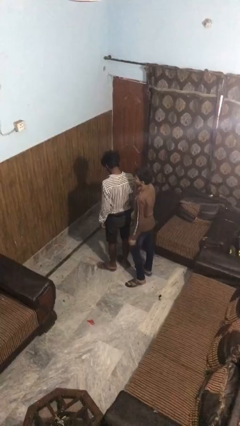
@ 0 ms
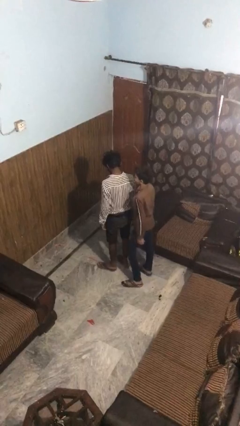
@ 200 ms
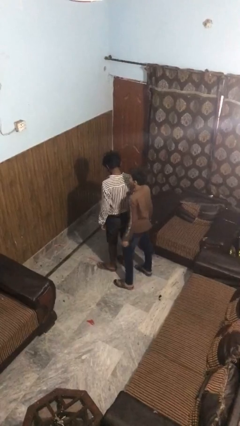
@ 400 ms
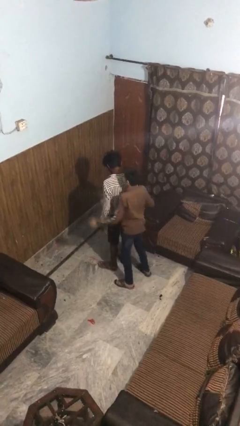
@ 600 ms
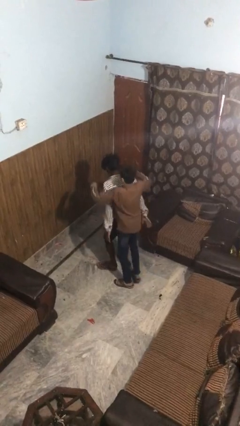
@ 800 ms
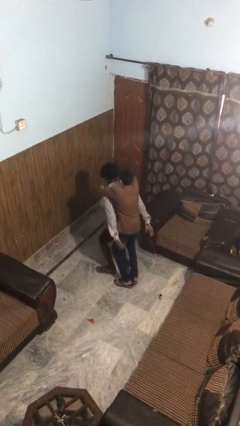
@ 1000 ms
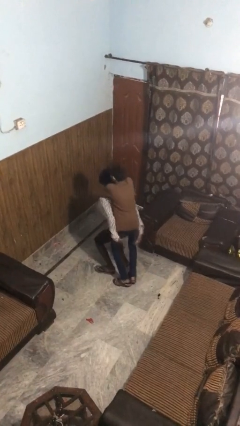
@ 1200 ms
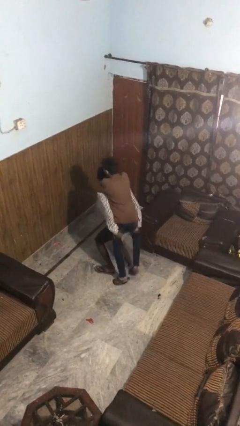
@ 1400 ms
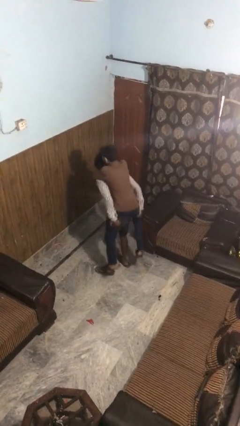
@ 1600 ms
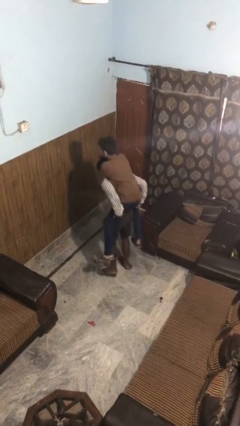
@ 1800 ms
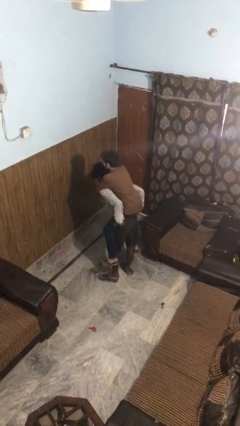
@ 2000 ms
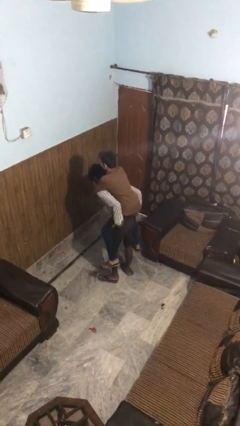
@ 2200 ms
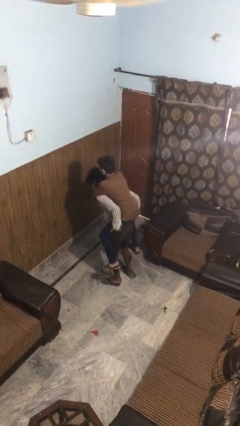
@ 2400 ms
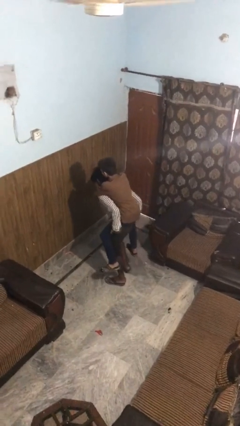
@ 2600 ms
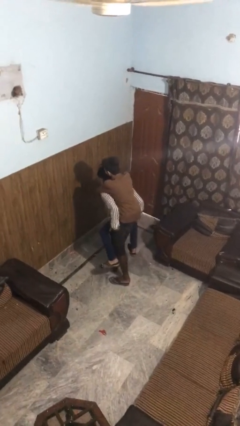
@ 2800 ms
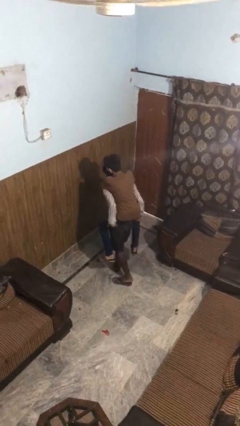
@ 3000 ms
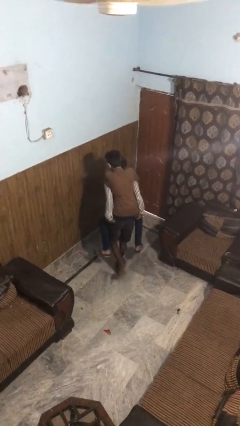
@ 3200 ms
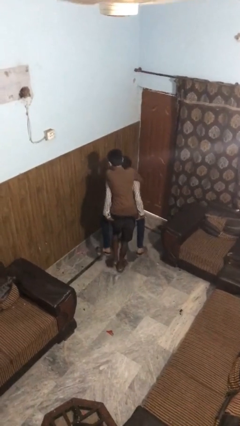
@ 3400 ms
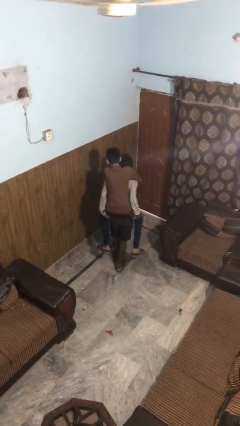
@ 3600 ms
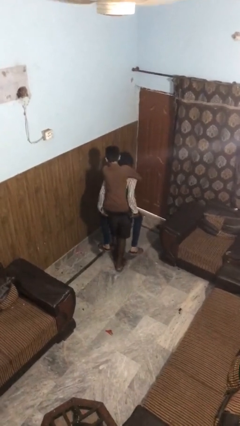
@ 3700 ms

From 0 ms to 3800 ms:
person carries person on back

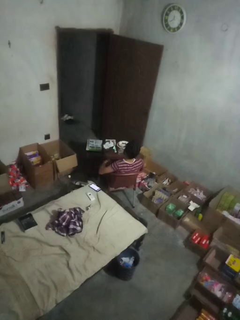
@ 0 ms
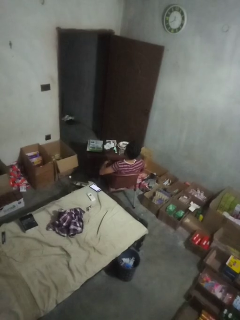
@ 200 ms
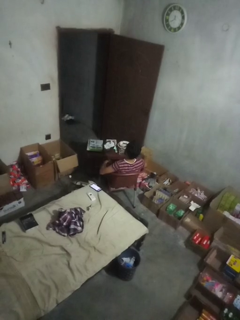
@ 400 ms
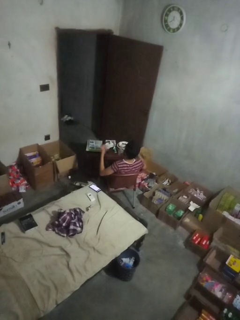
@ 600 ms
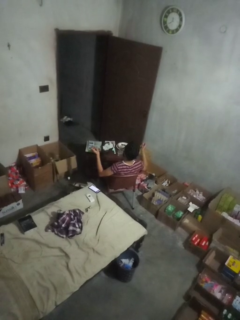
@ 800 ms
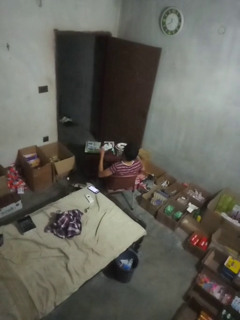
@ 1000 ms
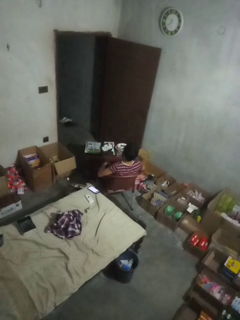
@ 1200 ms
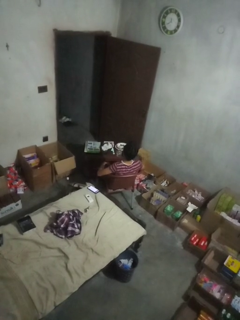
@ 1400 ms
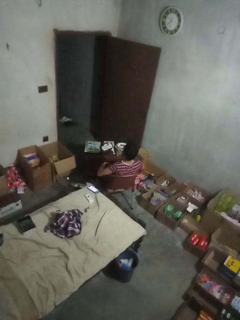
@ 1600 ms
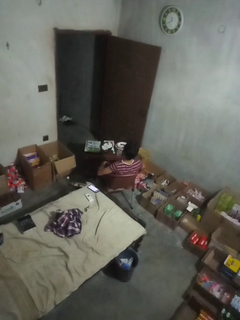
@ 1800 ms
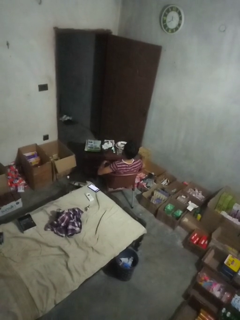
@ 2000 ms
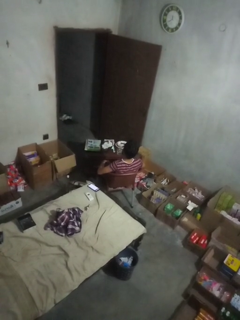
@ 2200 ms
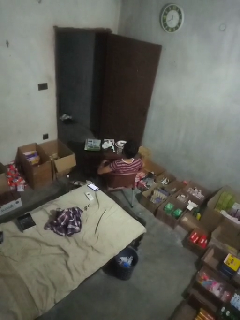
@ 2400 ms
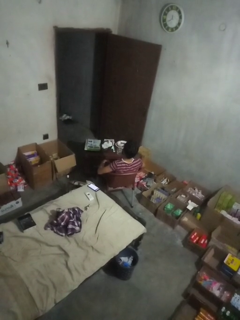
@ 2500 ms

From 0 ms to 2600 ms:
person snaps fingers

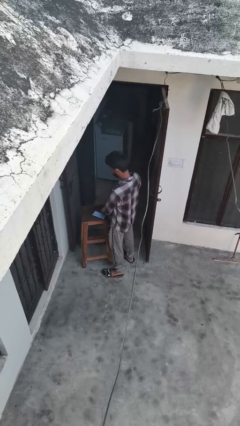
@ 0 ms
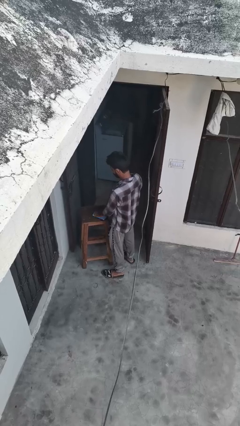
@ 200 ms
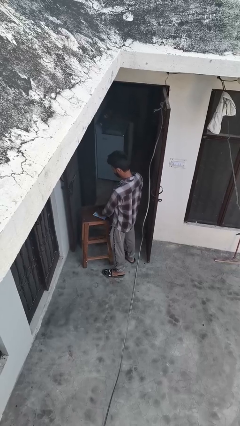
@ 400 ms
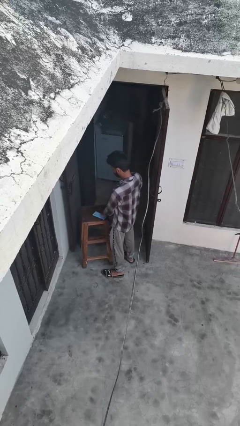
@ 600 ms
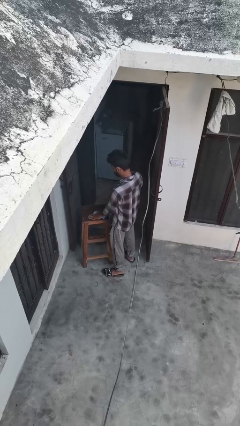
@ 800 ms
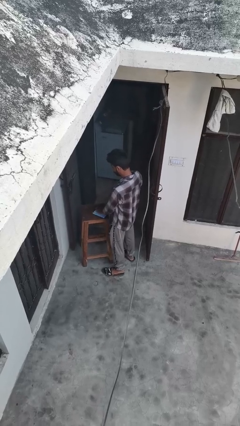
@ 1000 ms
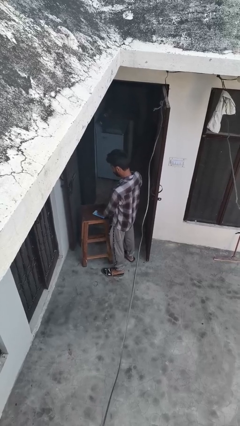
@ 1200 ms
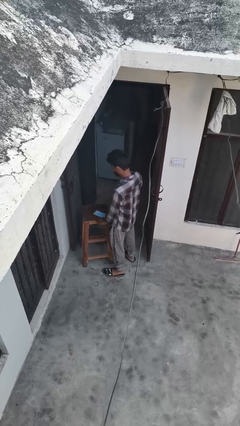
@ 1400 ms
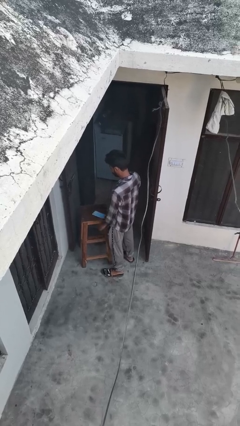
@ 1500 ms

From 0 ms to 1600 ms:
person waves hand over object

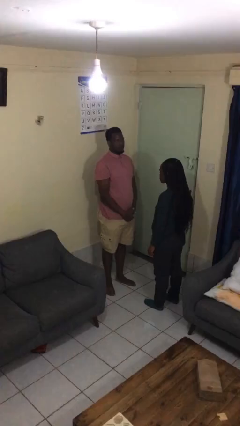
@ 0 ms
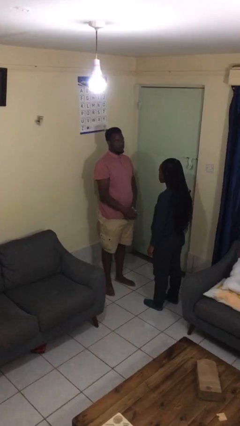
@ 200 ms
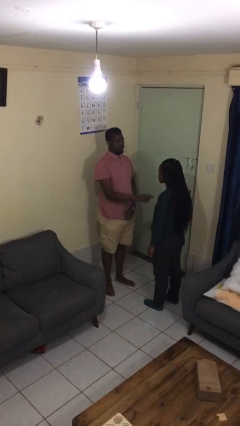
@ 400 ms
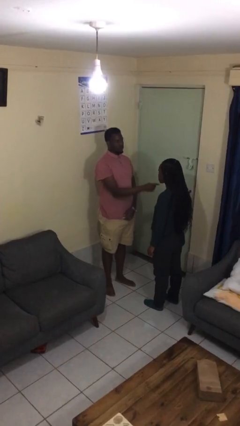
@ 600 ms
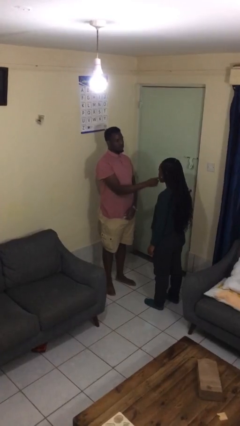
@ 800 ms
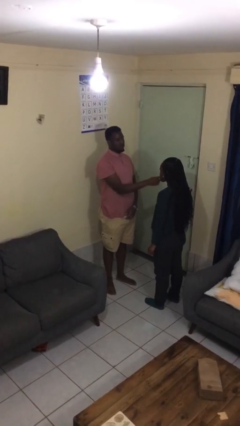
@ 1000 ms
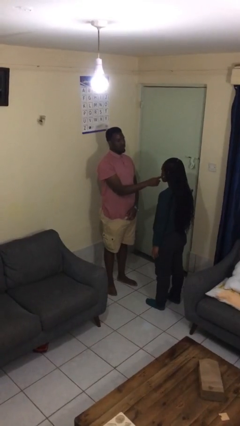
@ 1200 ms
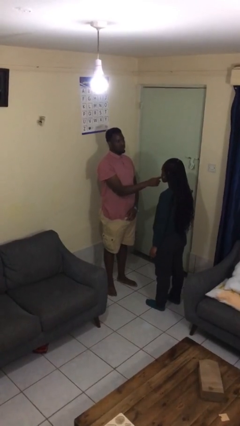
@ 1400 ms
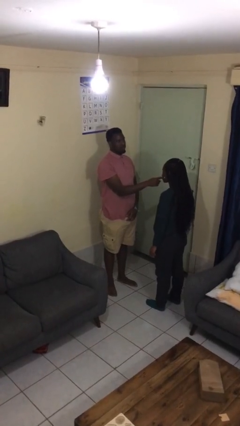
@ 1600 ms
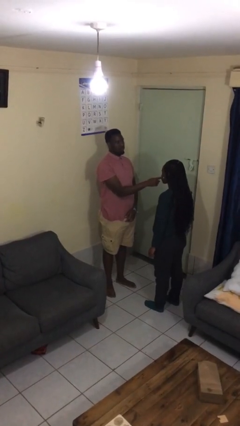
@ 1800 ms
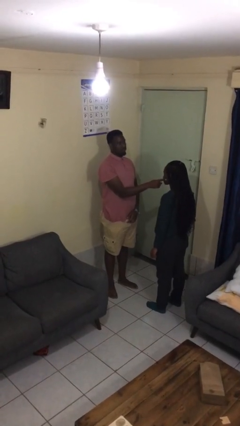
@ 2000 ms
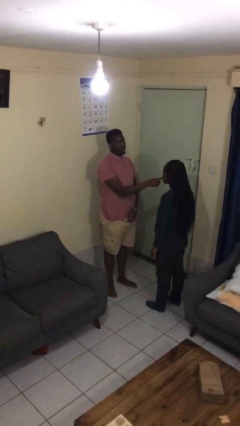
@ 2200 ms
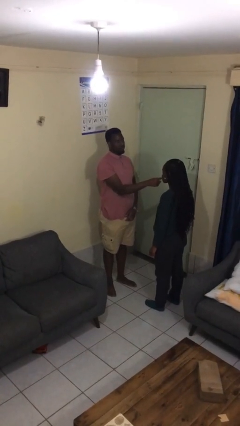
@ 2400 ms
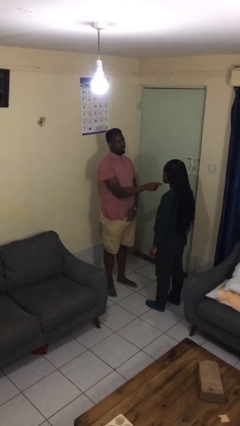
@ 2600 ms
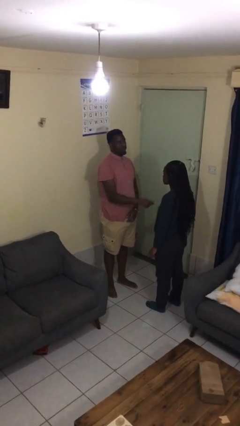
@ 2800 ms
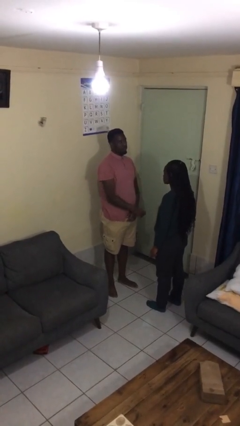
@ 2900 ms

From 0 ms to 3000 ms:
person touches face of person

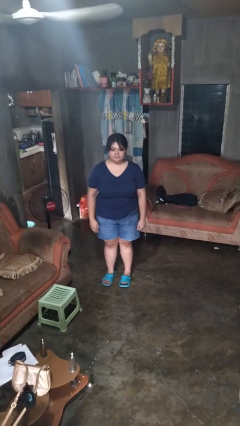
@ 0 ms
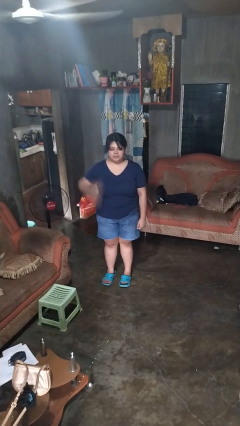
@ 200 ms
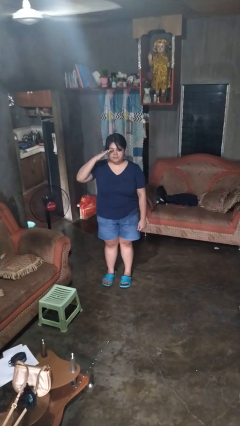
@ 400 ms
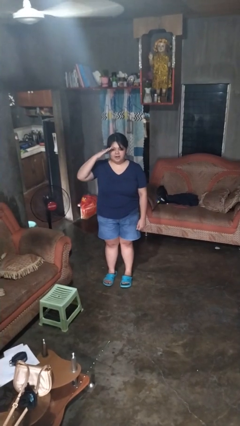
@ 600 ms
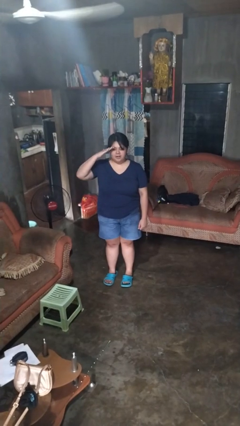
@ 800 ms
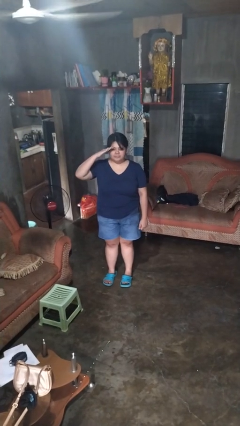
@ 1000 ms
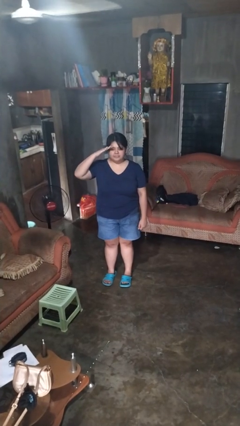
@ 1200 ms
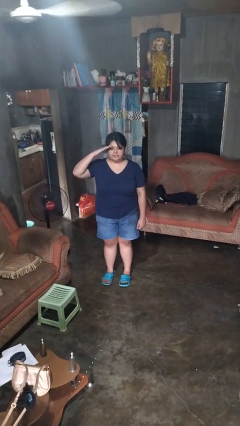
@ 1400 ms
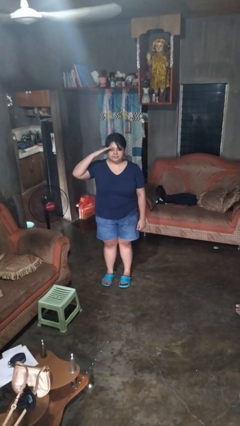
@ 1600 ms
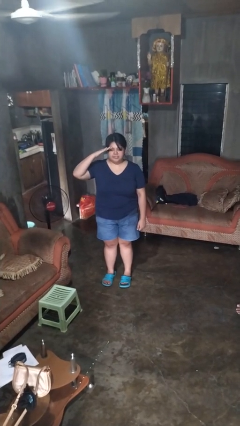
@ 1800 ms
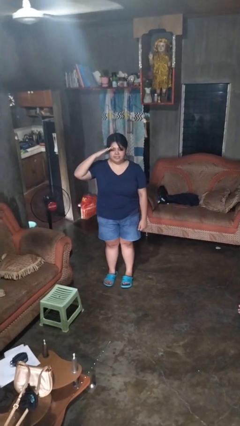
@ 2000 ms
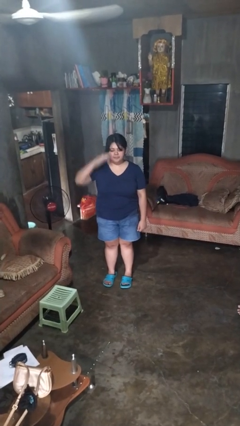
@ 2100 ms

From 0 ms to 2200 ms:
person salutes

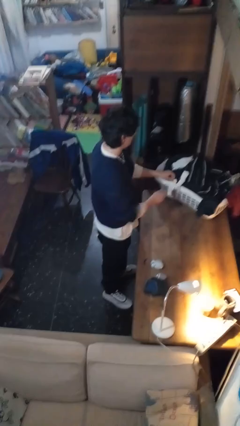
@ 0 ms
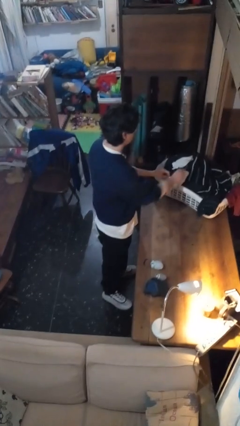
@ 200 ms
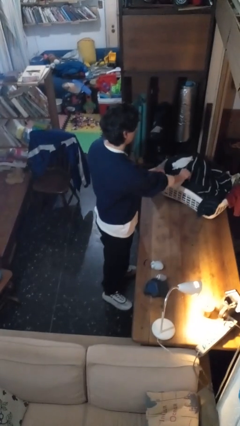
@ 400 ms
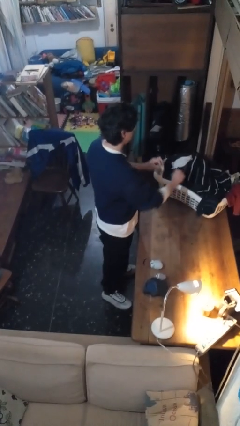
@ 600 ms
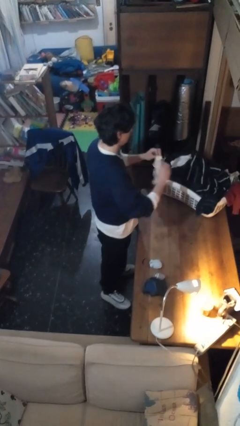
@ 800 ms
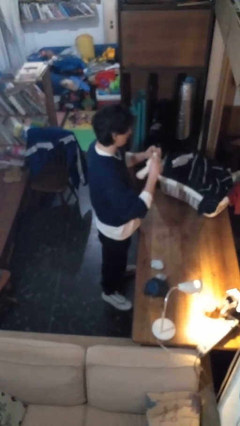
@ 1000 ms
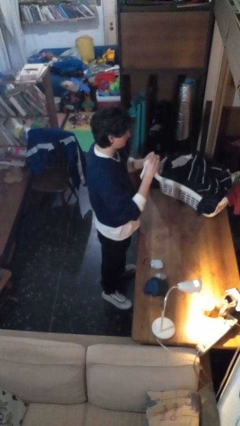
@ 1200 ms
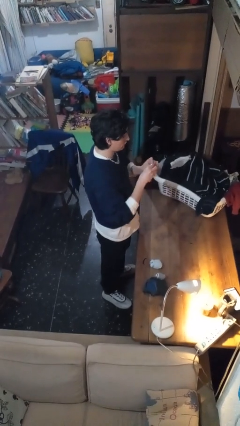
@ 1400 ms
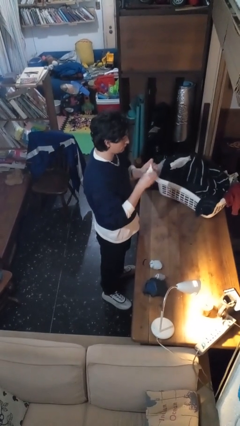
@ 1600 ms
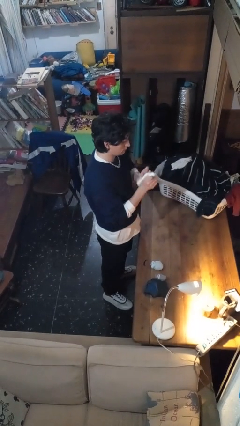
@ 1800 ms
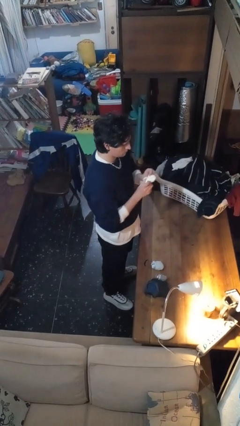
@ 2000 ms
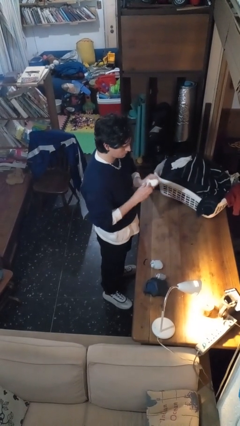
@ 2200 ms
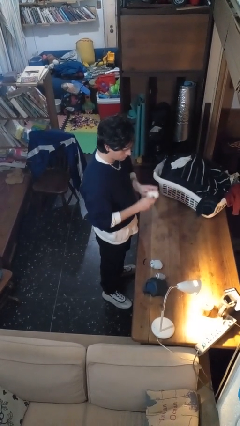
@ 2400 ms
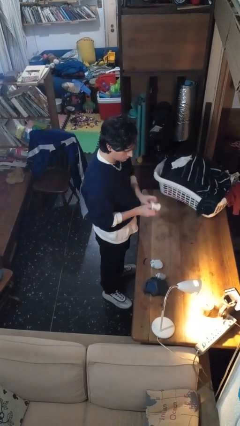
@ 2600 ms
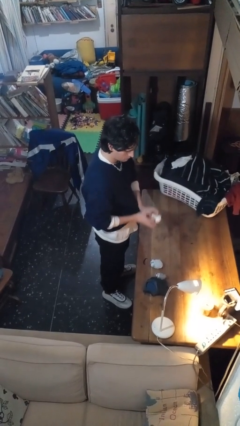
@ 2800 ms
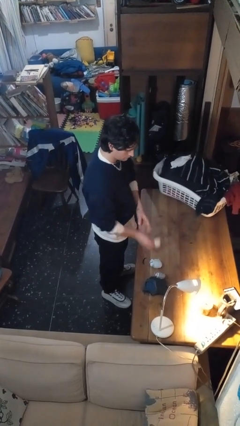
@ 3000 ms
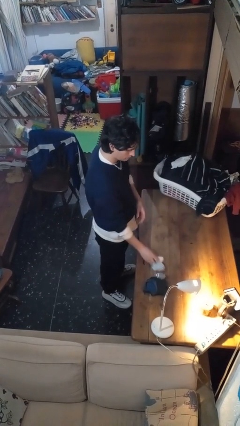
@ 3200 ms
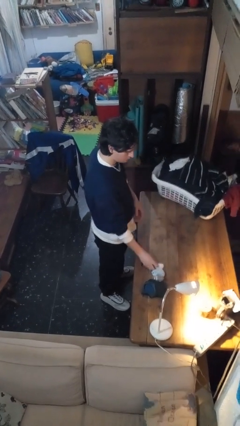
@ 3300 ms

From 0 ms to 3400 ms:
person folds socks

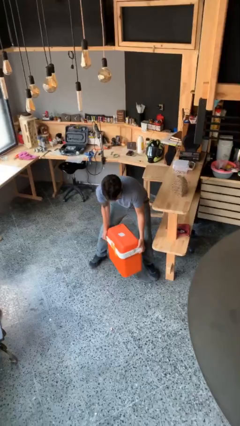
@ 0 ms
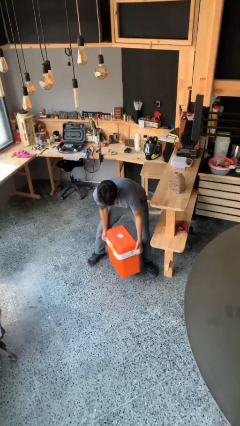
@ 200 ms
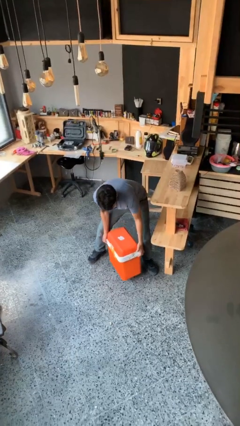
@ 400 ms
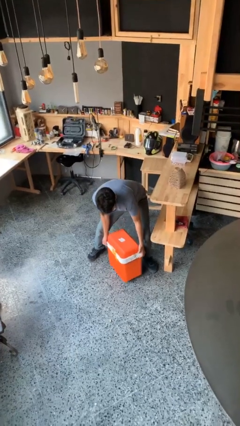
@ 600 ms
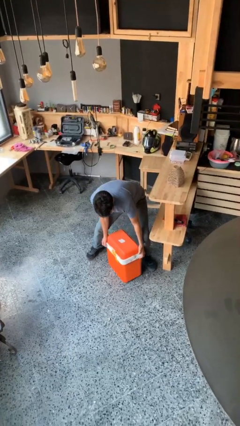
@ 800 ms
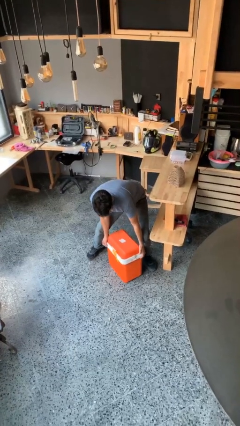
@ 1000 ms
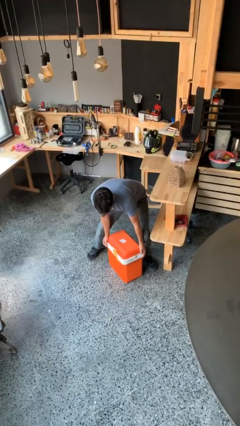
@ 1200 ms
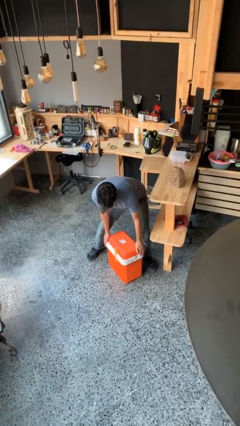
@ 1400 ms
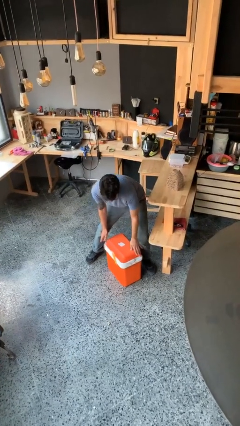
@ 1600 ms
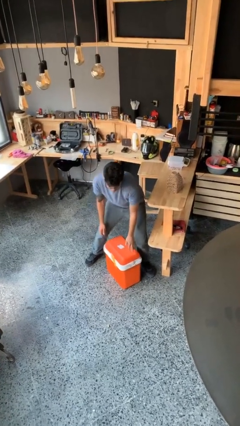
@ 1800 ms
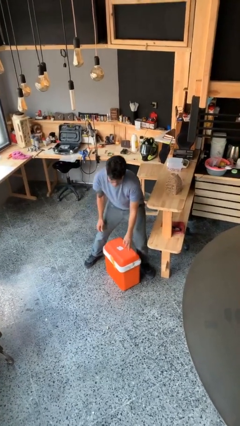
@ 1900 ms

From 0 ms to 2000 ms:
person puts down object on floor
